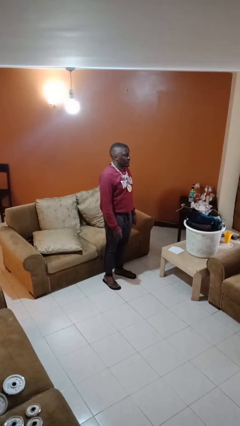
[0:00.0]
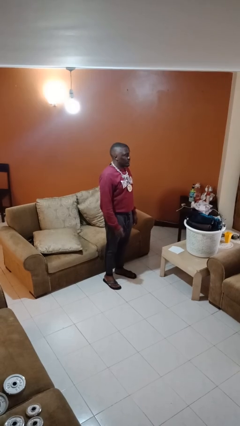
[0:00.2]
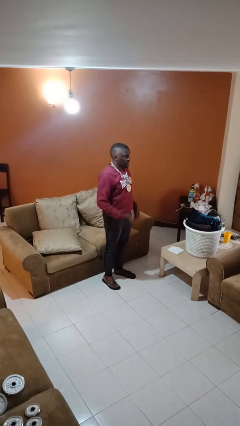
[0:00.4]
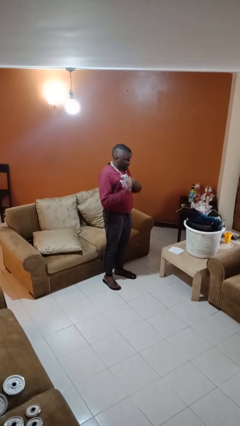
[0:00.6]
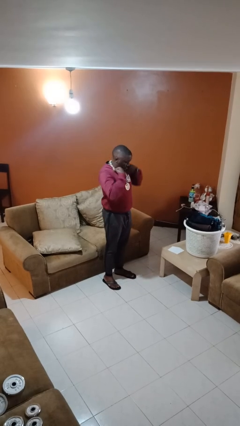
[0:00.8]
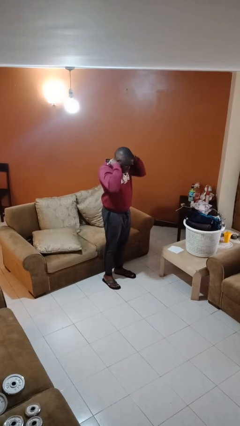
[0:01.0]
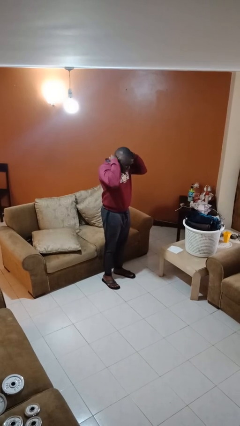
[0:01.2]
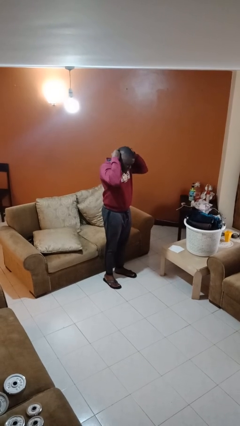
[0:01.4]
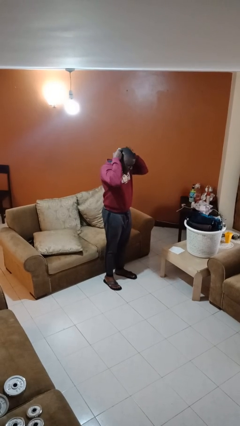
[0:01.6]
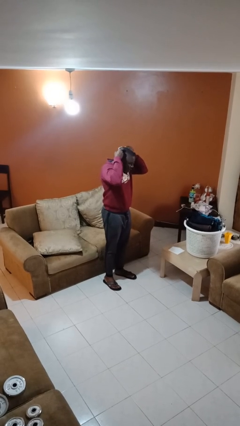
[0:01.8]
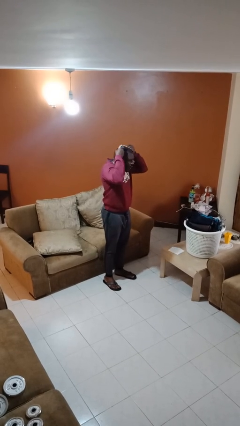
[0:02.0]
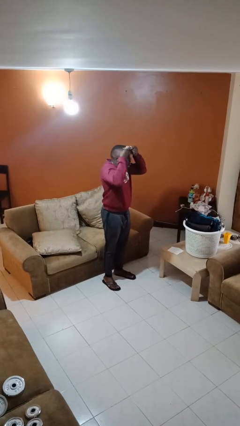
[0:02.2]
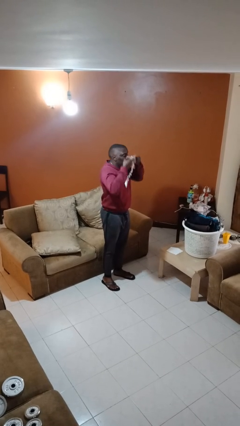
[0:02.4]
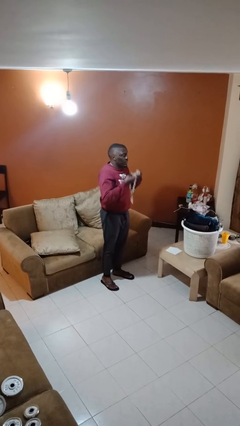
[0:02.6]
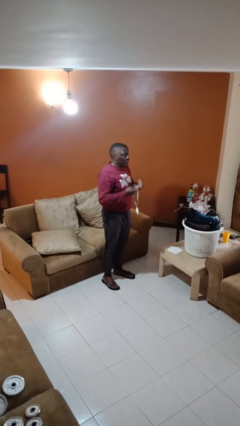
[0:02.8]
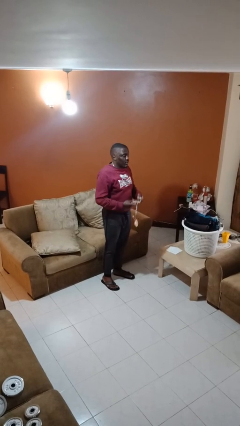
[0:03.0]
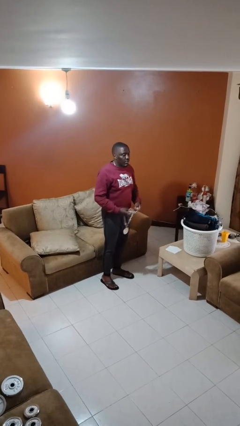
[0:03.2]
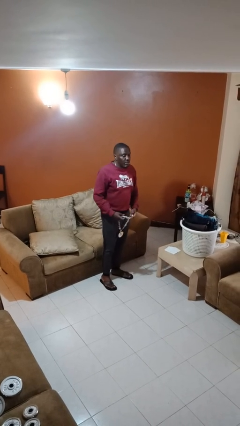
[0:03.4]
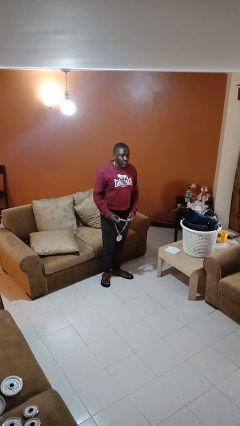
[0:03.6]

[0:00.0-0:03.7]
person takes off necklace

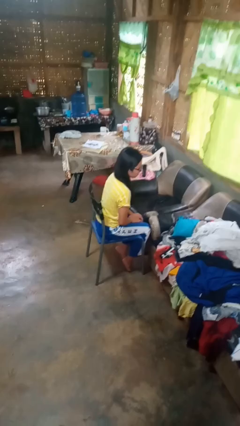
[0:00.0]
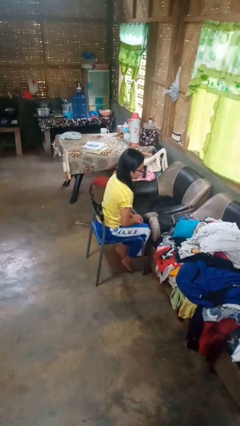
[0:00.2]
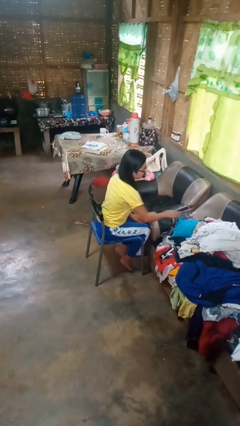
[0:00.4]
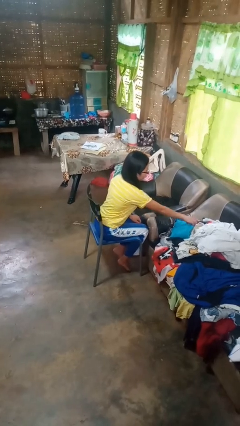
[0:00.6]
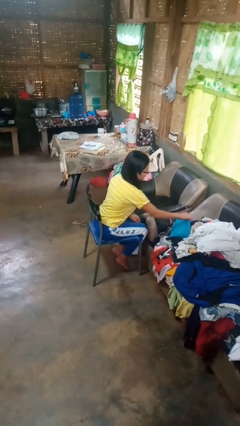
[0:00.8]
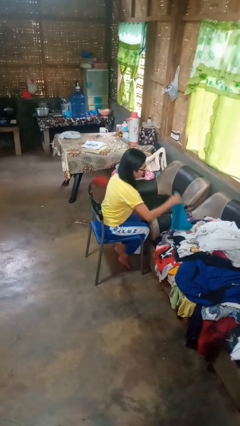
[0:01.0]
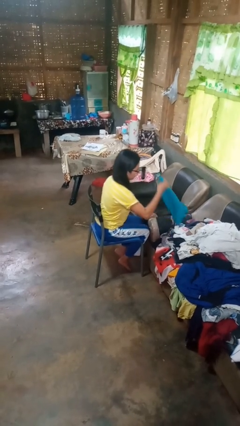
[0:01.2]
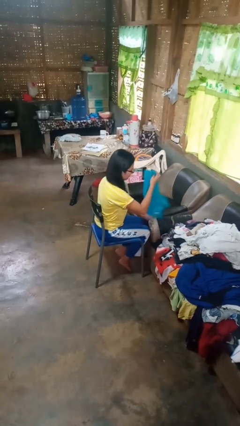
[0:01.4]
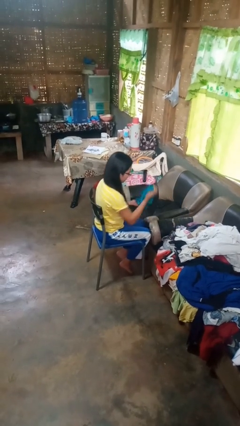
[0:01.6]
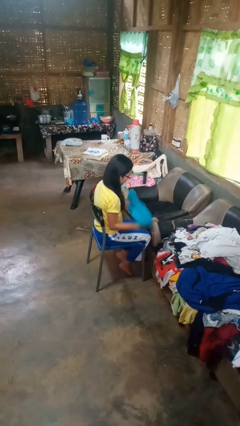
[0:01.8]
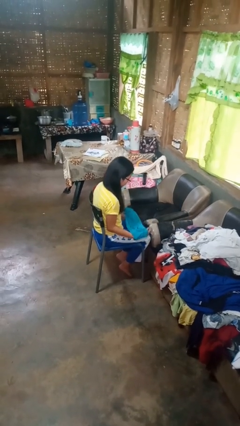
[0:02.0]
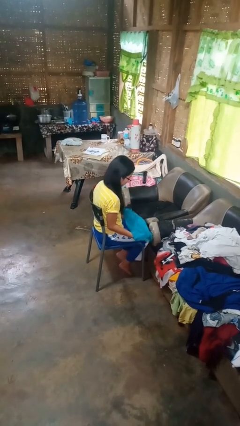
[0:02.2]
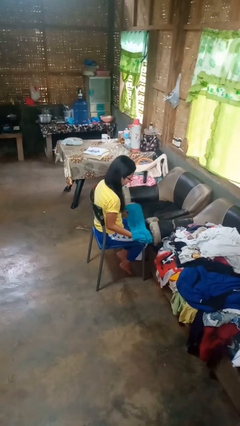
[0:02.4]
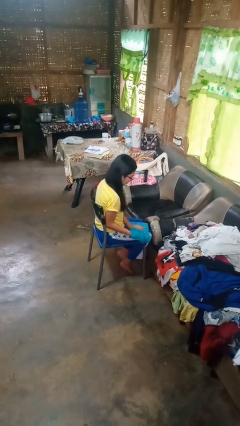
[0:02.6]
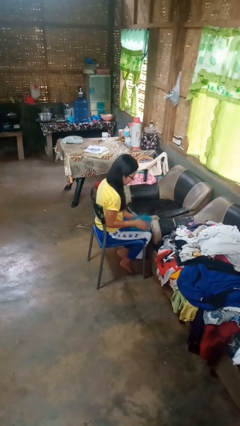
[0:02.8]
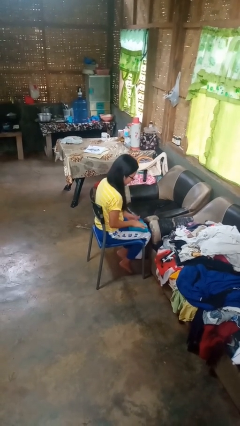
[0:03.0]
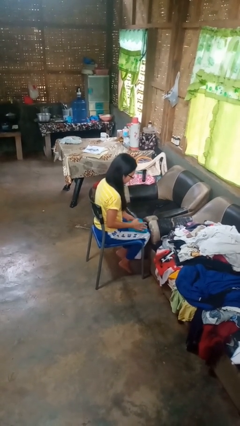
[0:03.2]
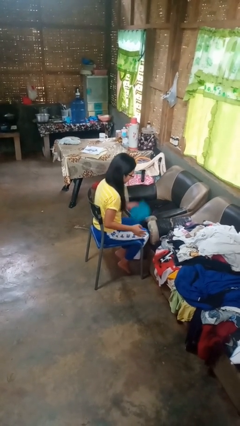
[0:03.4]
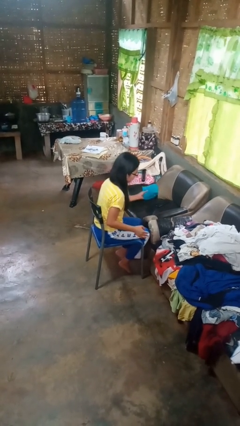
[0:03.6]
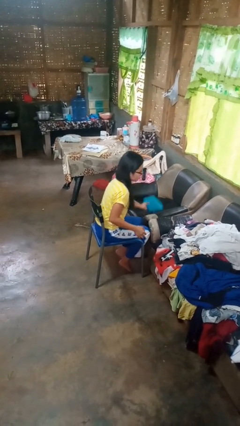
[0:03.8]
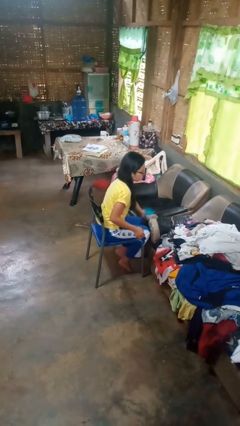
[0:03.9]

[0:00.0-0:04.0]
person folds shirt

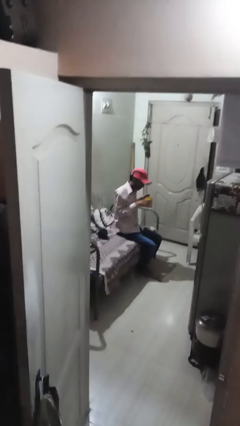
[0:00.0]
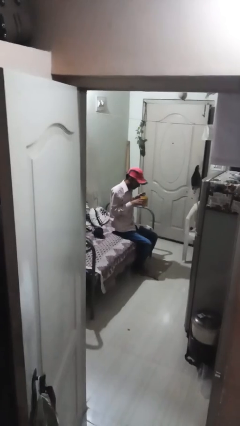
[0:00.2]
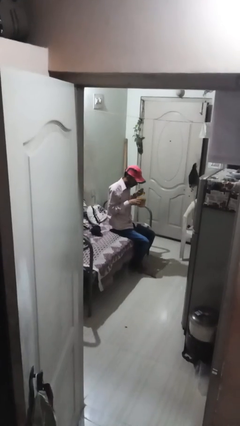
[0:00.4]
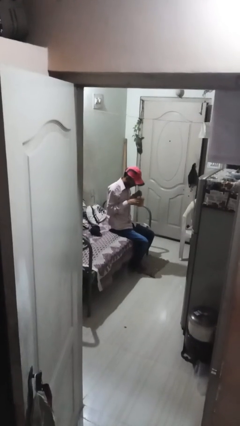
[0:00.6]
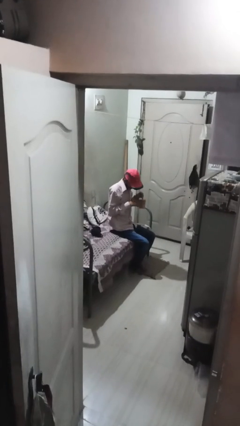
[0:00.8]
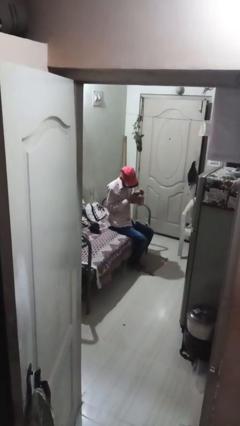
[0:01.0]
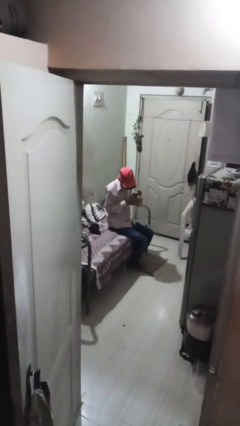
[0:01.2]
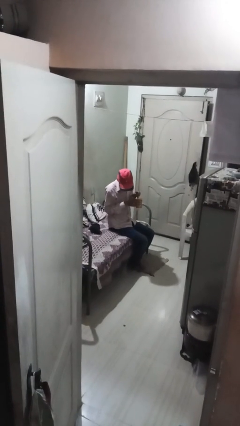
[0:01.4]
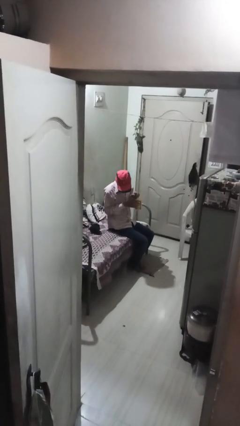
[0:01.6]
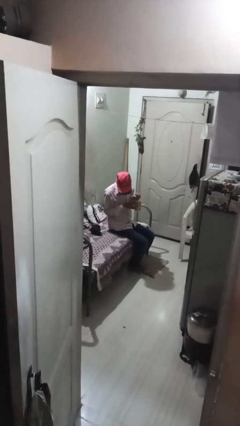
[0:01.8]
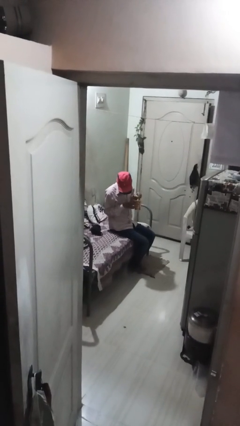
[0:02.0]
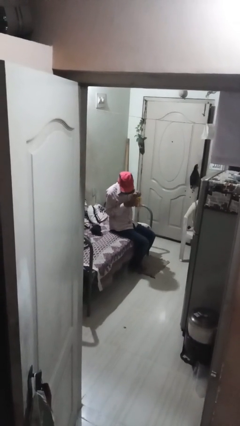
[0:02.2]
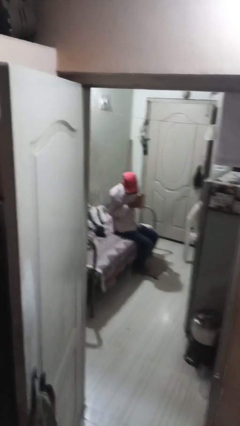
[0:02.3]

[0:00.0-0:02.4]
person stirs mug

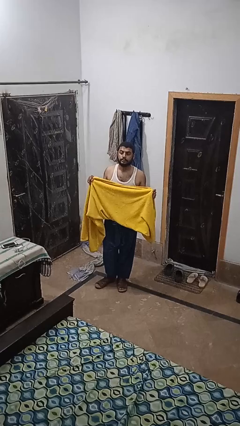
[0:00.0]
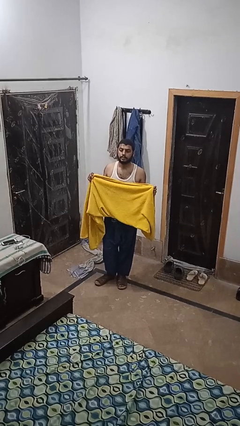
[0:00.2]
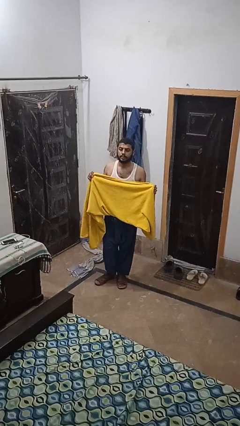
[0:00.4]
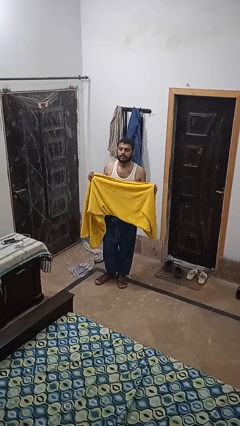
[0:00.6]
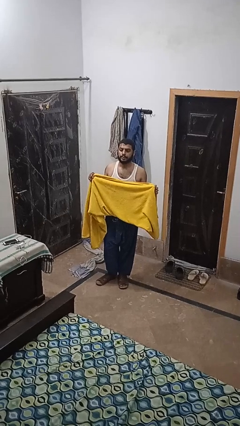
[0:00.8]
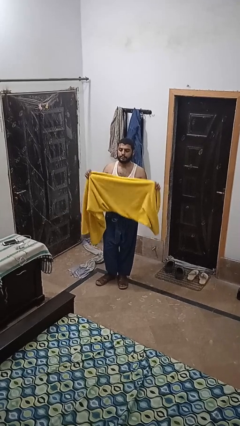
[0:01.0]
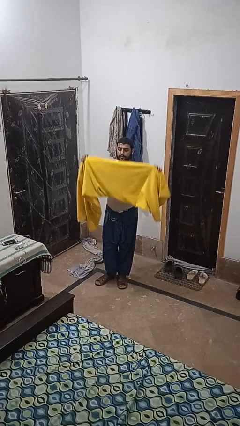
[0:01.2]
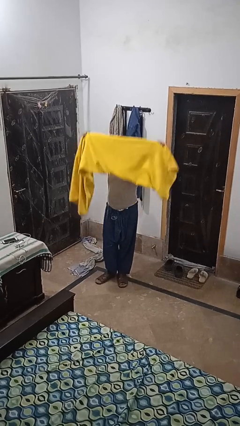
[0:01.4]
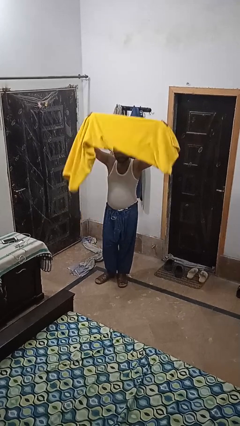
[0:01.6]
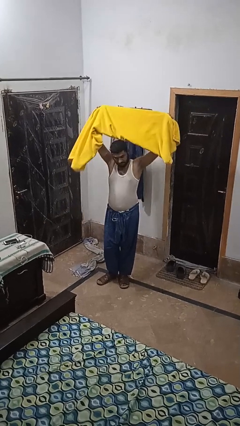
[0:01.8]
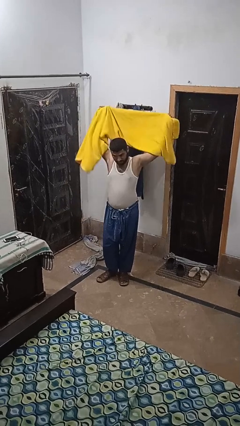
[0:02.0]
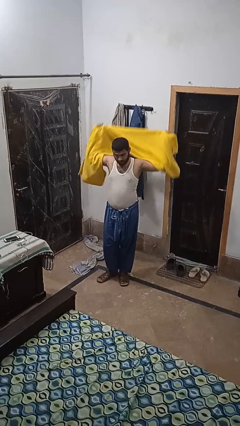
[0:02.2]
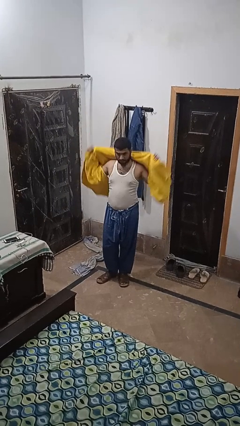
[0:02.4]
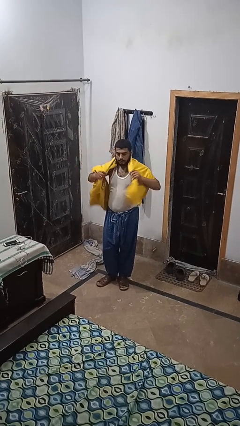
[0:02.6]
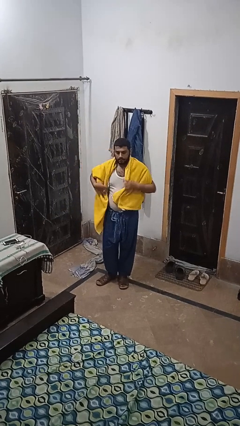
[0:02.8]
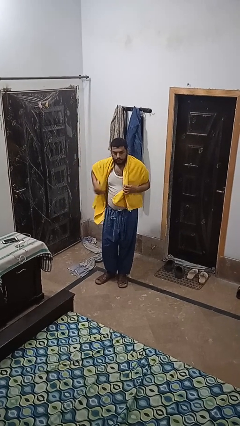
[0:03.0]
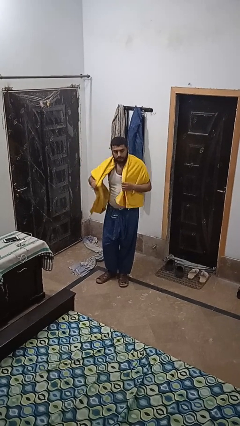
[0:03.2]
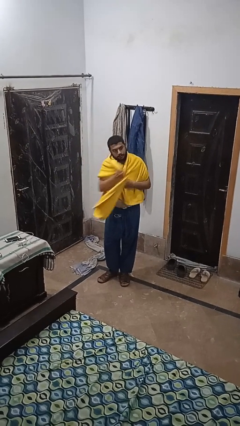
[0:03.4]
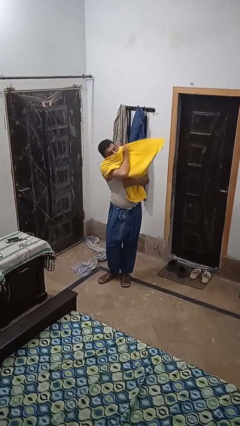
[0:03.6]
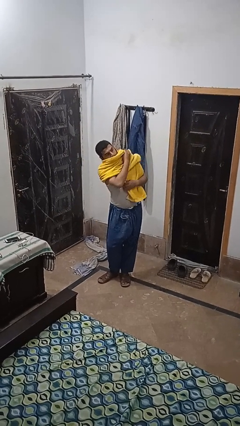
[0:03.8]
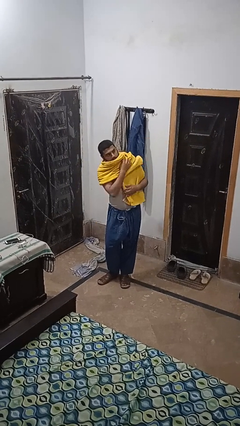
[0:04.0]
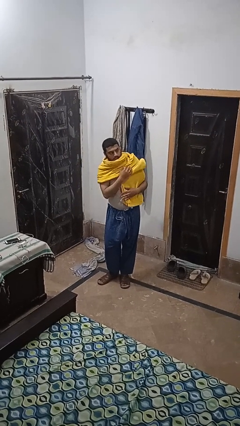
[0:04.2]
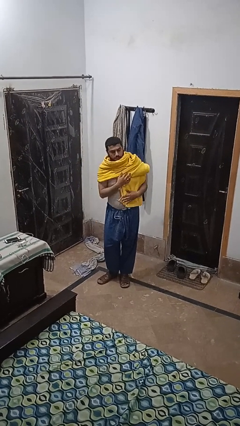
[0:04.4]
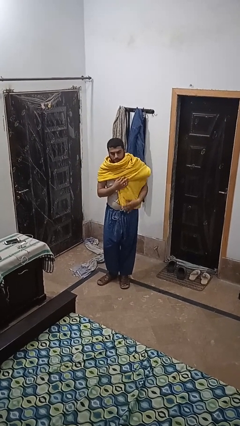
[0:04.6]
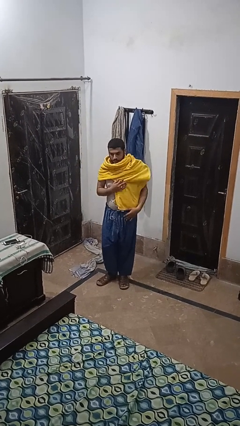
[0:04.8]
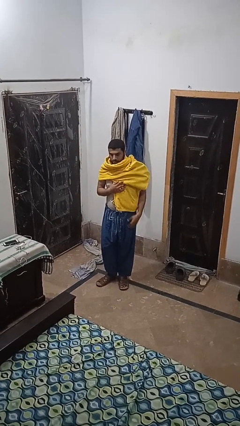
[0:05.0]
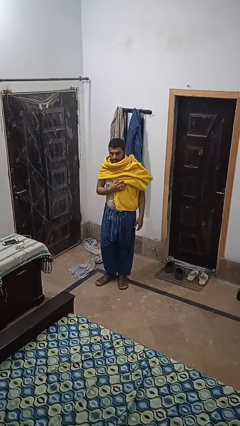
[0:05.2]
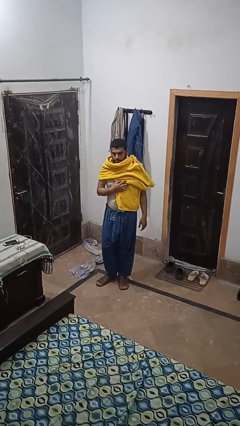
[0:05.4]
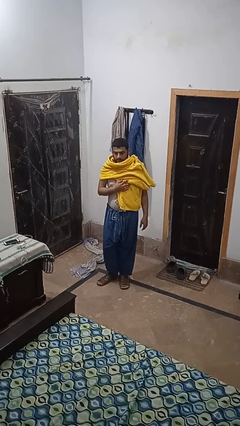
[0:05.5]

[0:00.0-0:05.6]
person puts on scarf

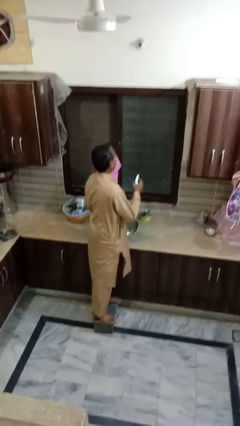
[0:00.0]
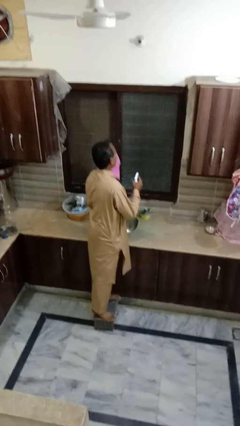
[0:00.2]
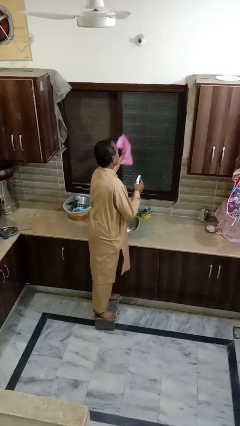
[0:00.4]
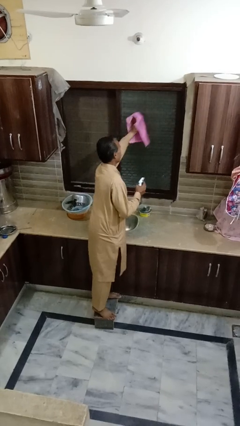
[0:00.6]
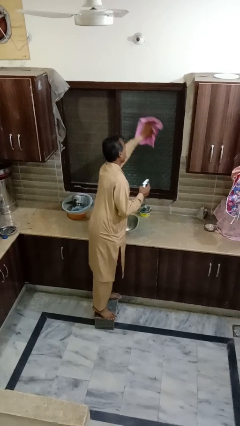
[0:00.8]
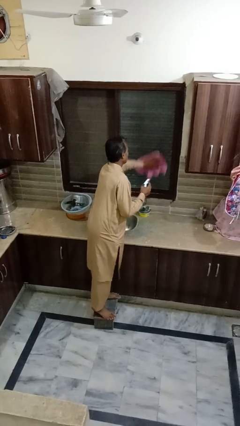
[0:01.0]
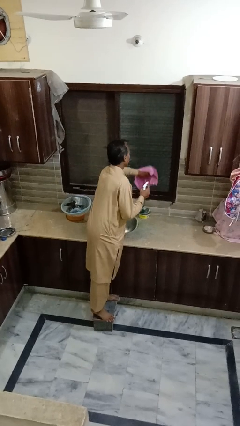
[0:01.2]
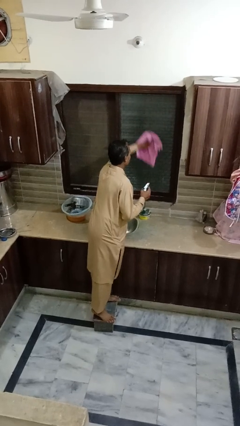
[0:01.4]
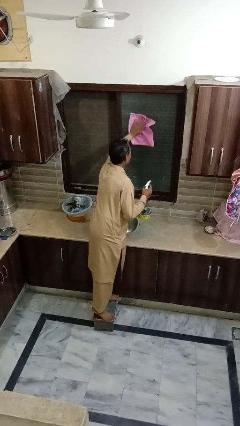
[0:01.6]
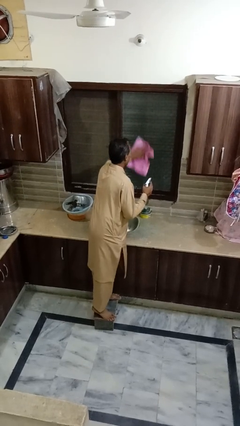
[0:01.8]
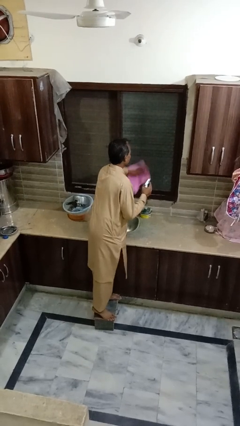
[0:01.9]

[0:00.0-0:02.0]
person washes window
